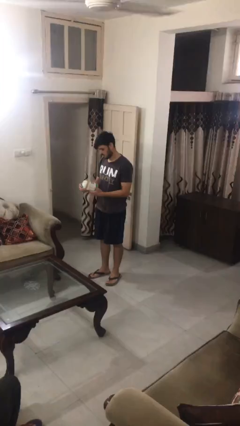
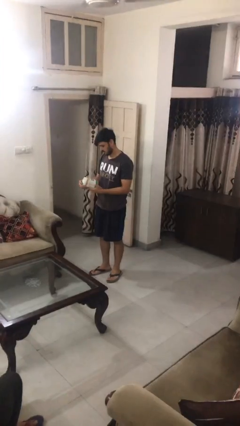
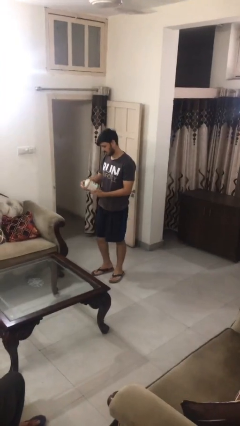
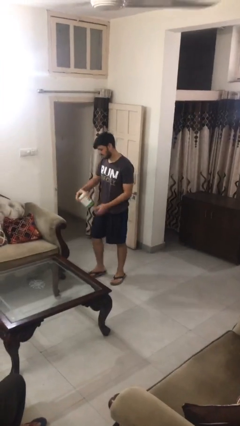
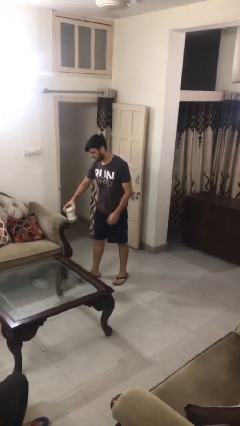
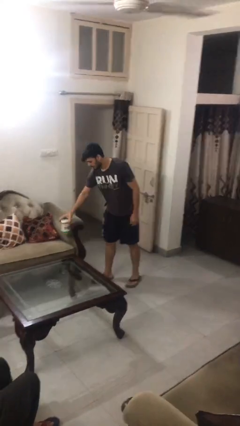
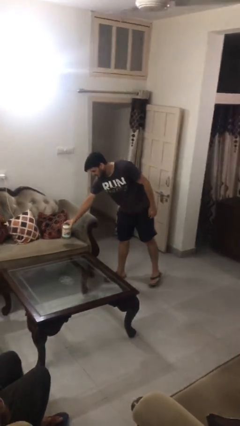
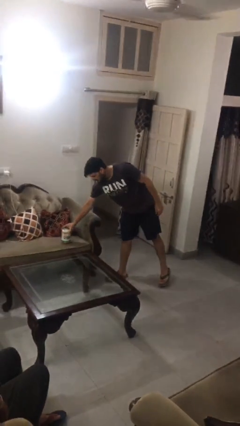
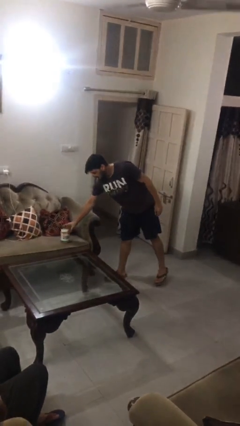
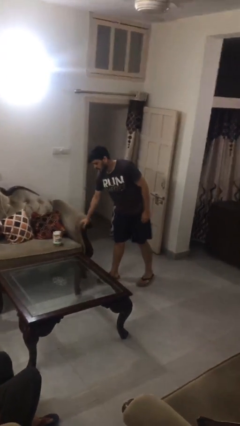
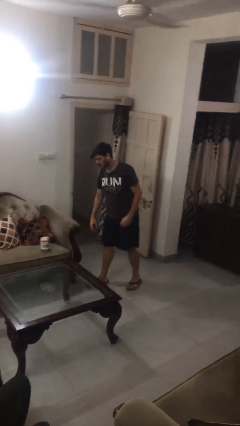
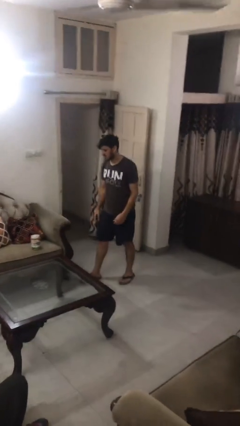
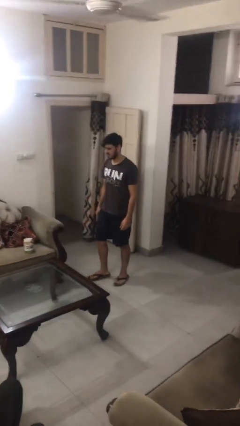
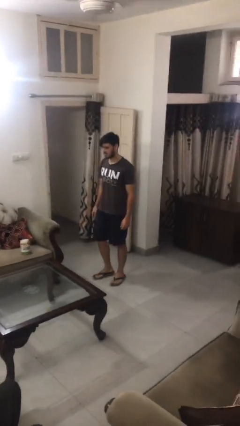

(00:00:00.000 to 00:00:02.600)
person puts down object on couch

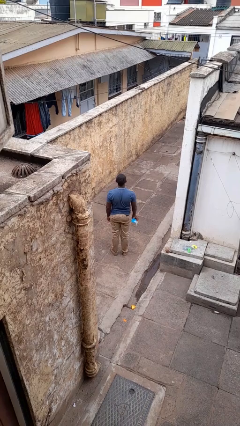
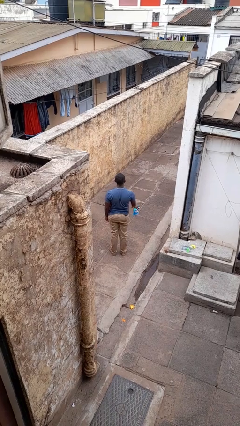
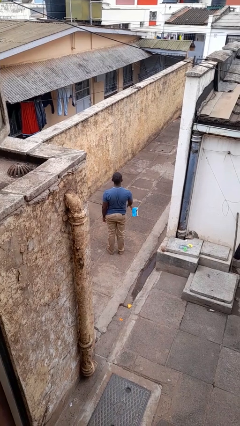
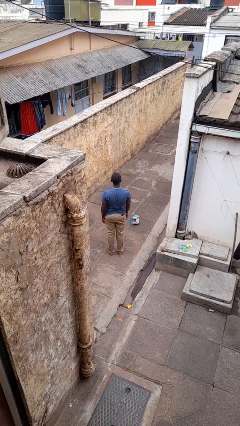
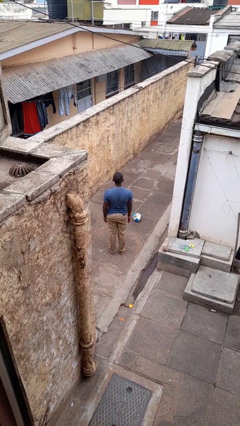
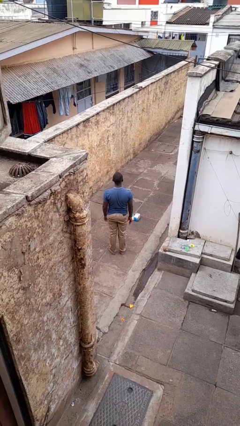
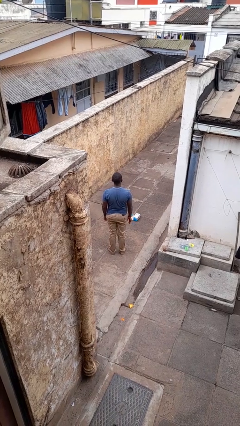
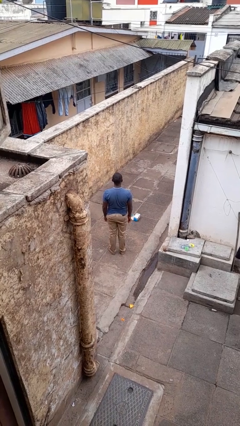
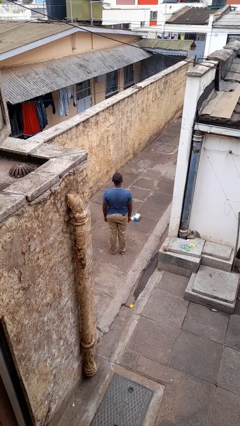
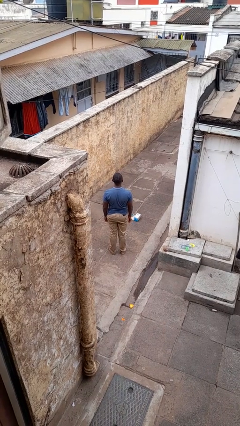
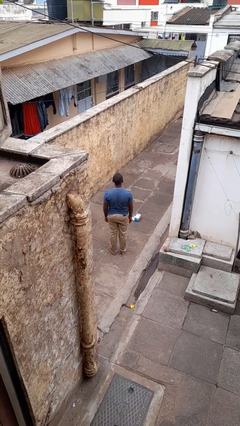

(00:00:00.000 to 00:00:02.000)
person throws object to ground

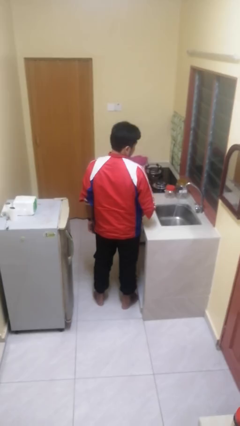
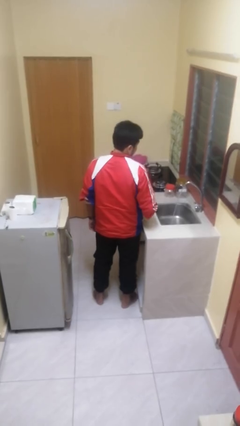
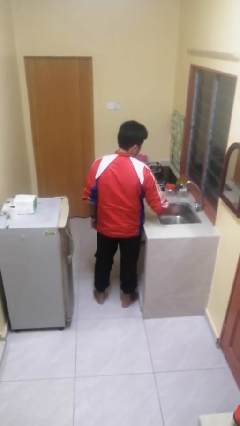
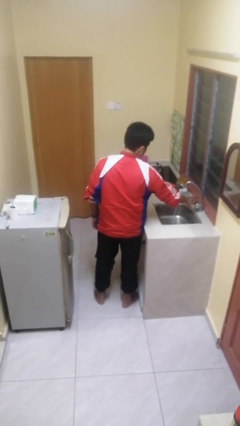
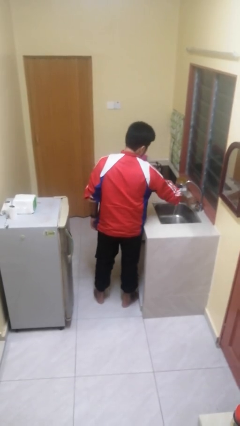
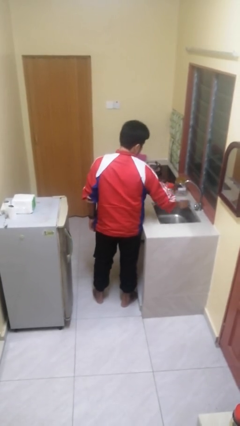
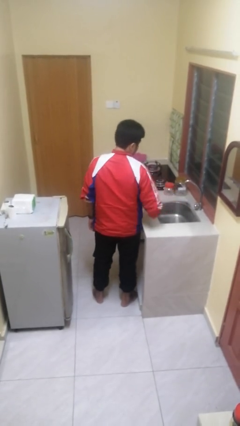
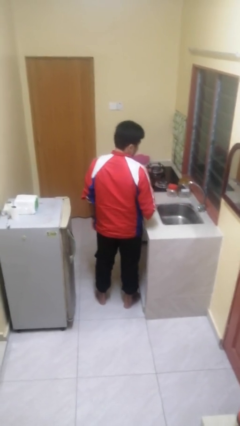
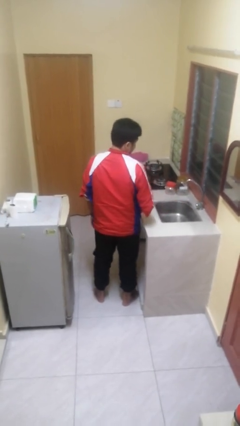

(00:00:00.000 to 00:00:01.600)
person turns off faucet

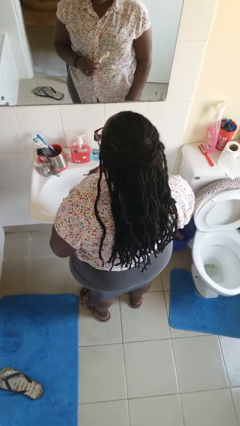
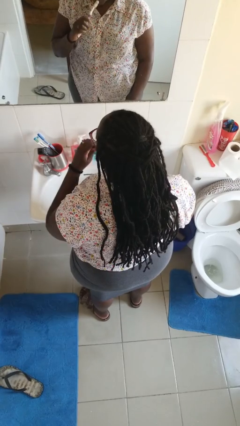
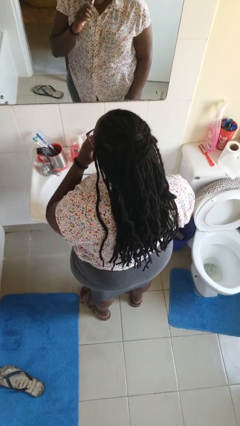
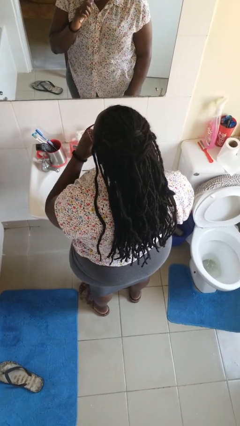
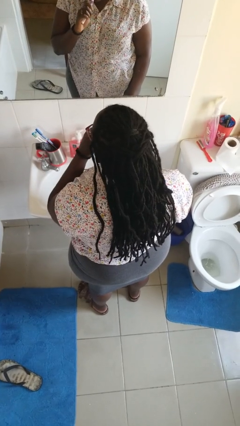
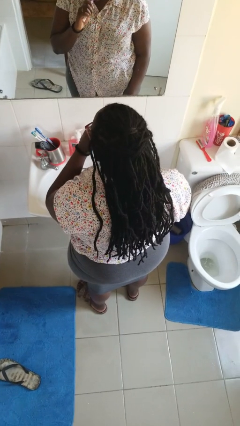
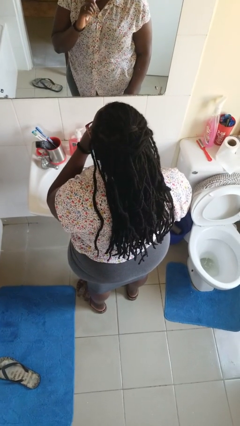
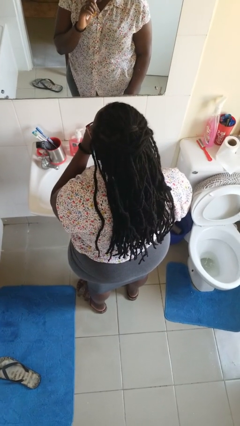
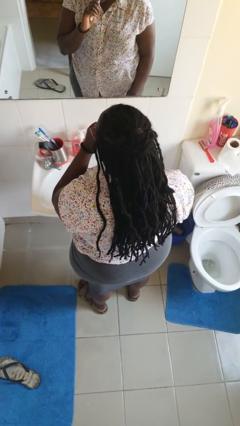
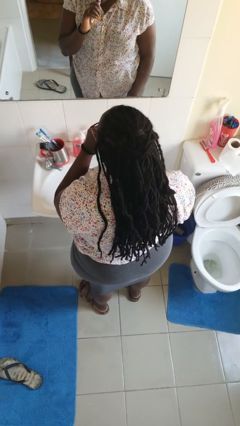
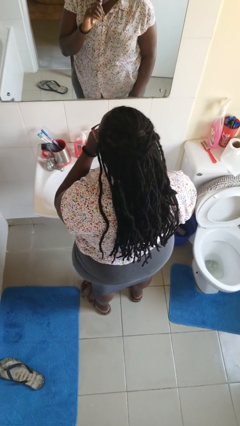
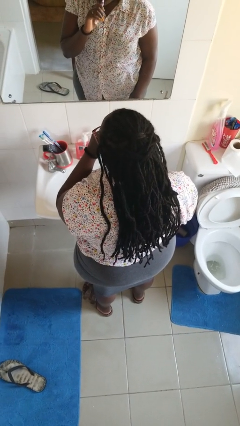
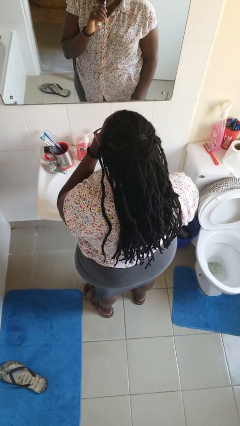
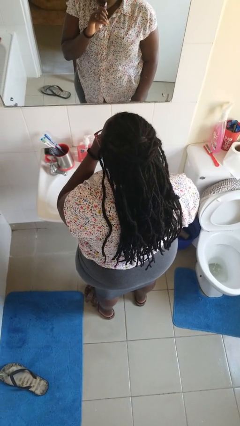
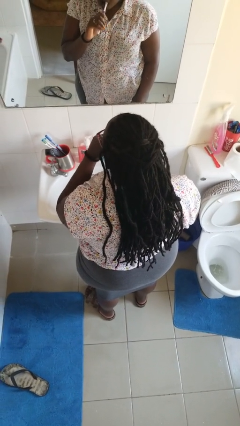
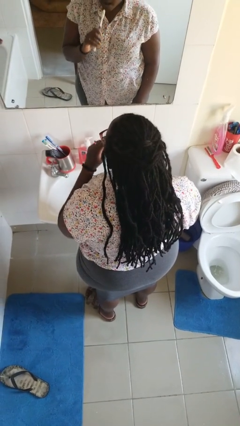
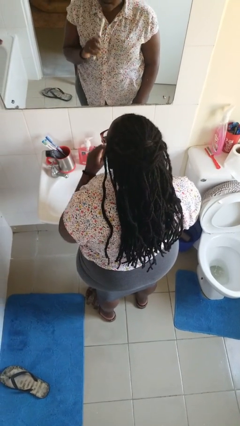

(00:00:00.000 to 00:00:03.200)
person brushes teeth

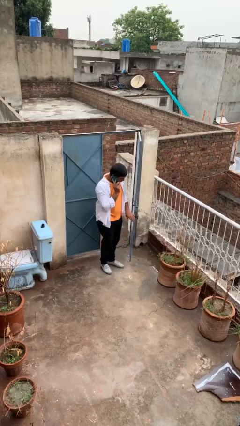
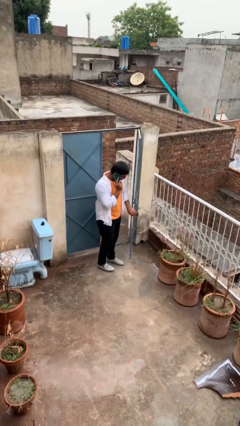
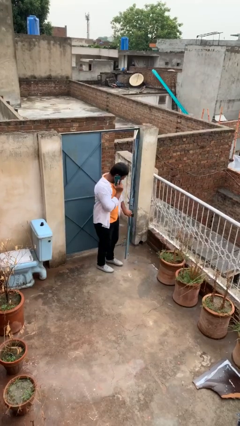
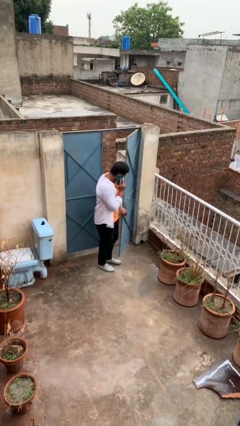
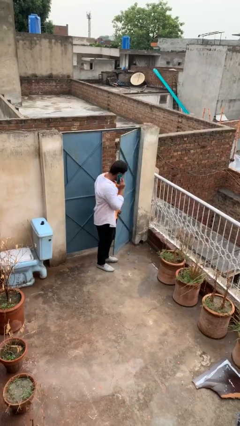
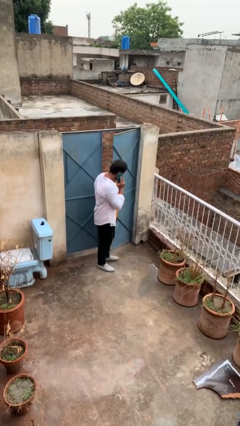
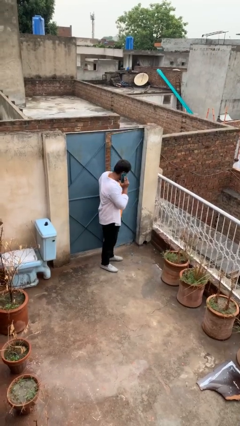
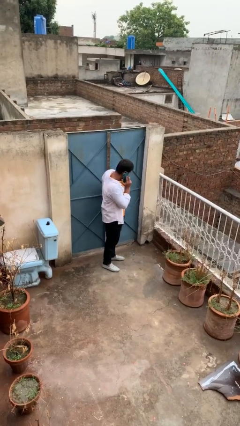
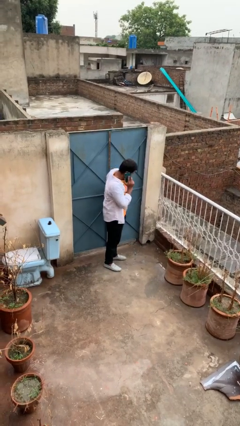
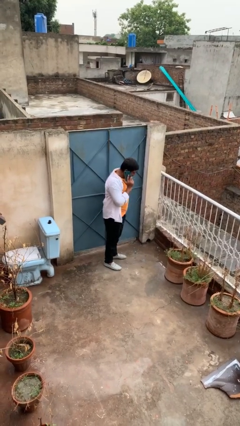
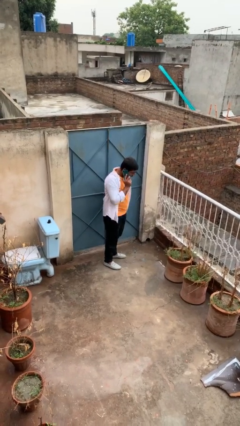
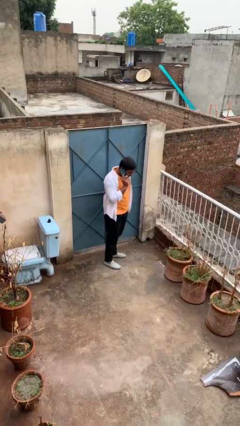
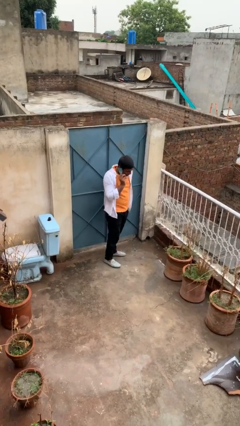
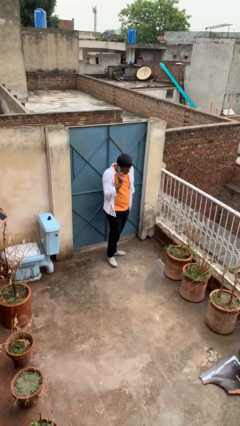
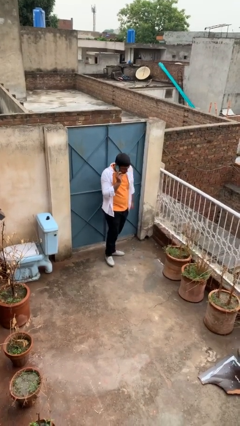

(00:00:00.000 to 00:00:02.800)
person closes facility door

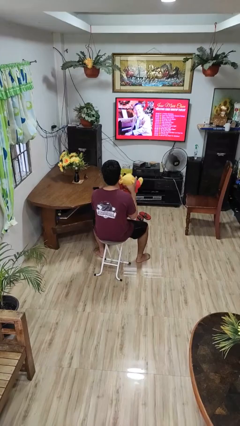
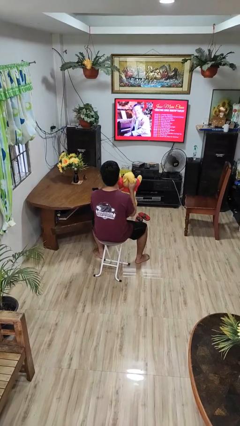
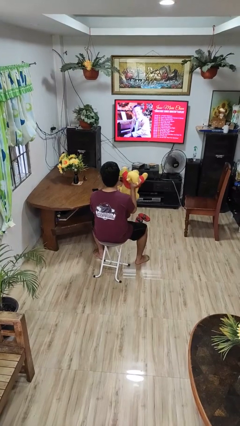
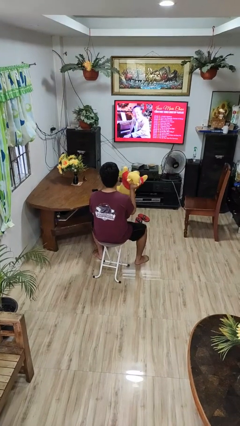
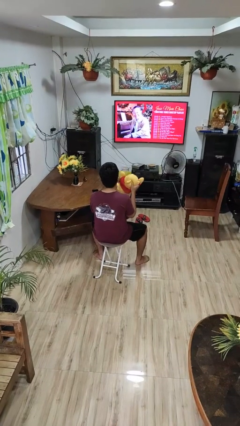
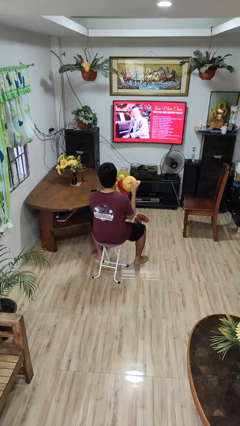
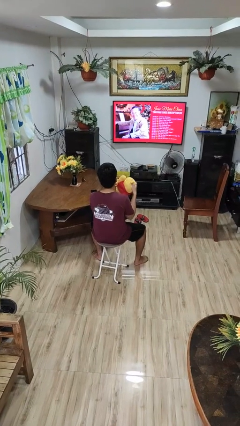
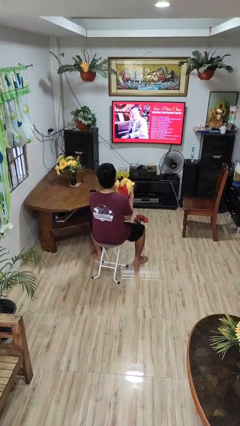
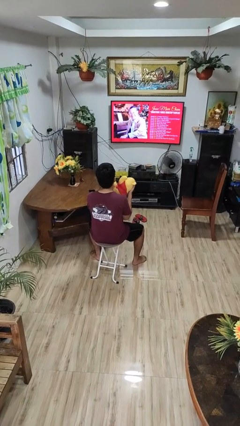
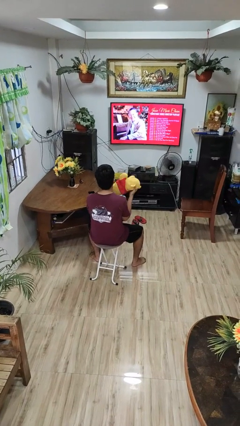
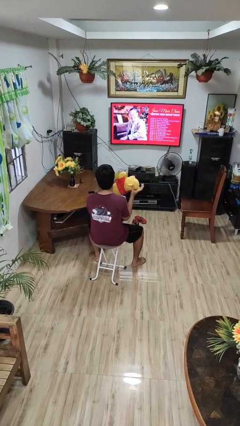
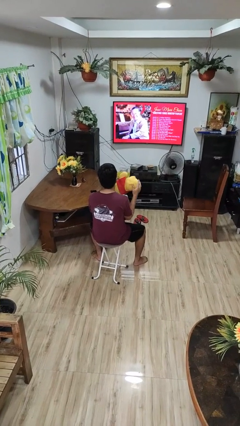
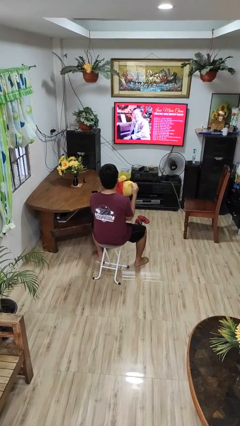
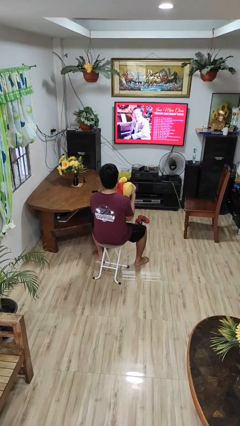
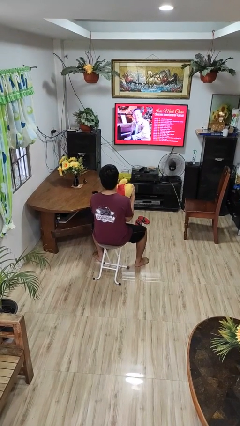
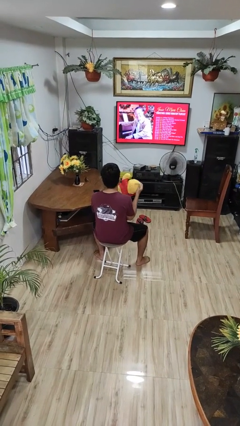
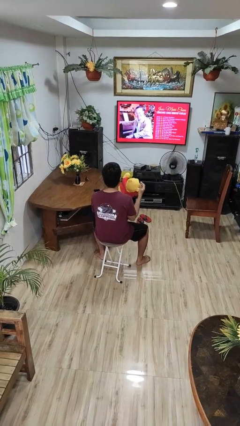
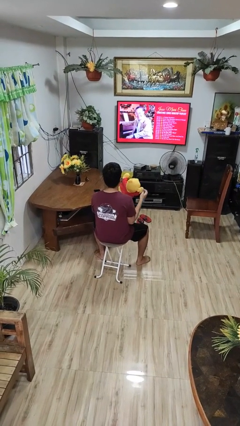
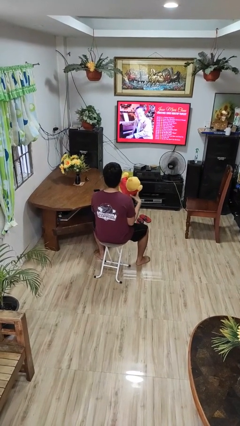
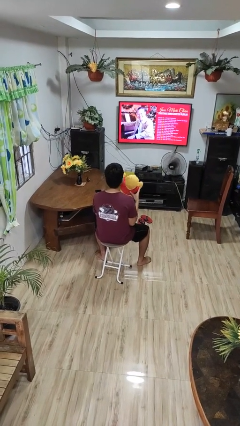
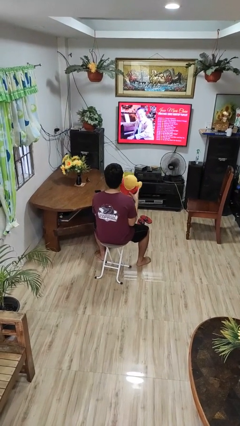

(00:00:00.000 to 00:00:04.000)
person squeezes object

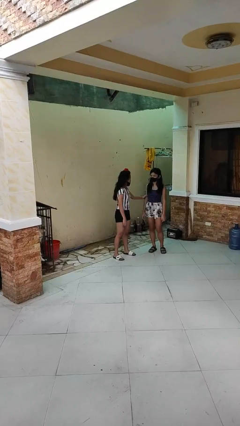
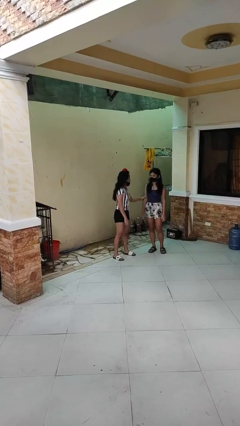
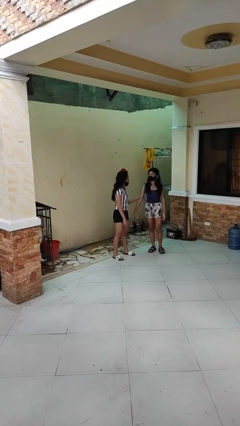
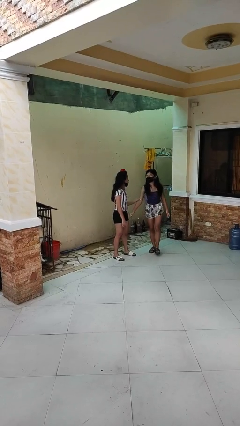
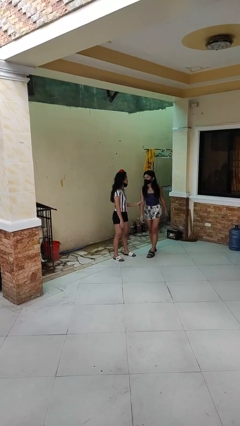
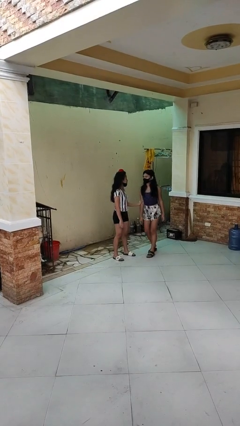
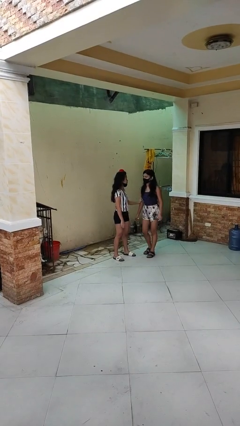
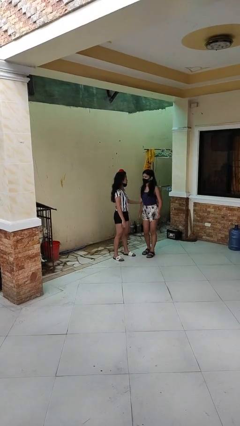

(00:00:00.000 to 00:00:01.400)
person grabs person by forearm
